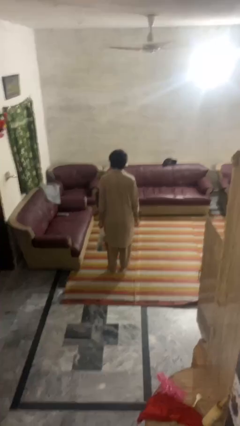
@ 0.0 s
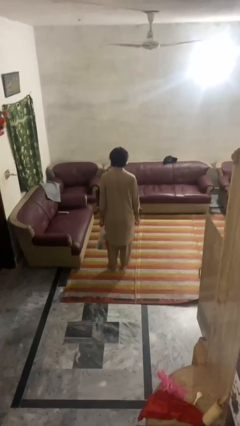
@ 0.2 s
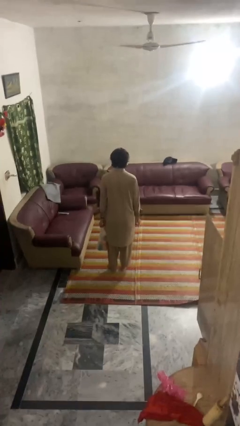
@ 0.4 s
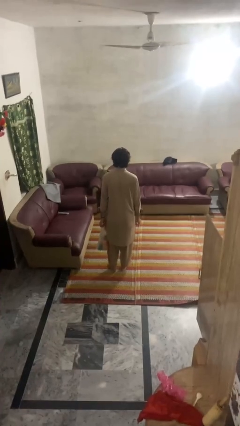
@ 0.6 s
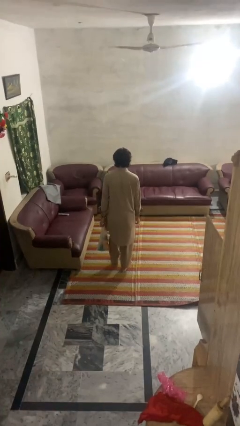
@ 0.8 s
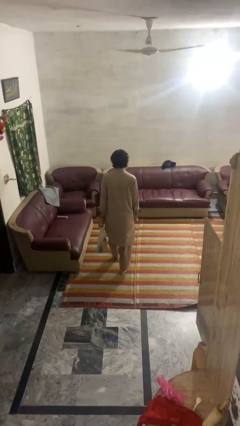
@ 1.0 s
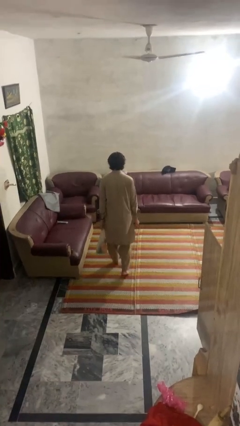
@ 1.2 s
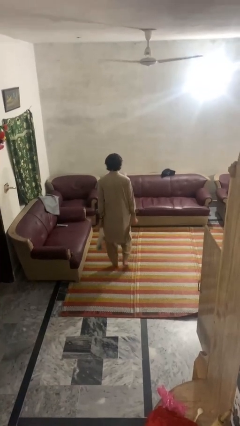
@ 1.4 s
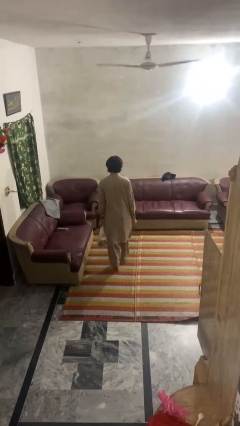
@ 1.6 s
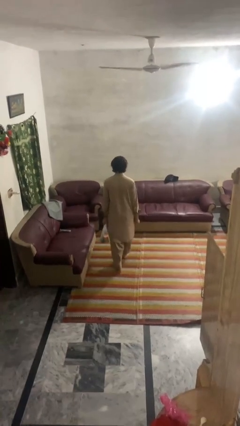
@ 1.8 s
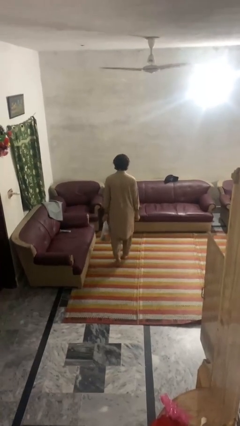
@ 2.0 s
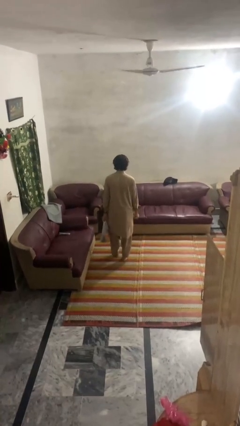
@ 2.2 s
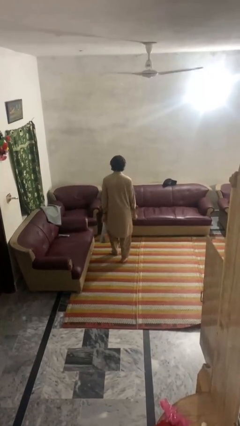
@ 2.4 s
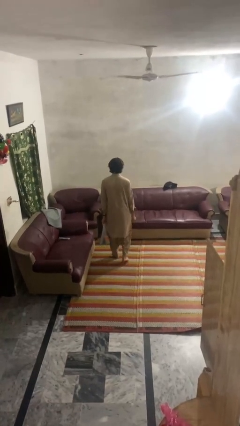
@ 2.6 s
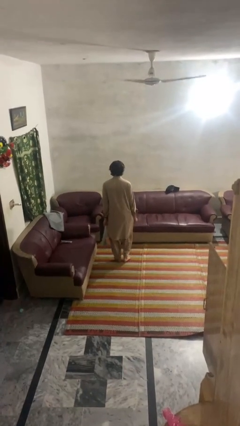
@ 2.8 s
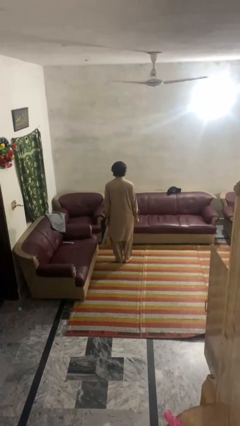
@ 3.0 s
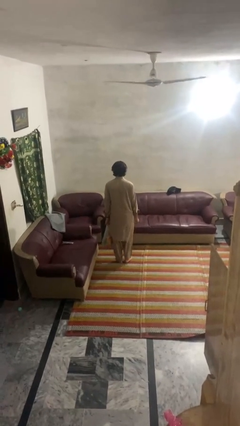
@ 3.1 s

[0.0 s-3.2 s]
person carries groceries

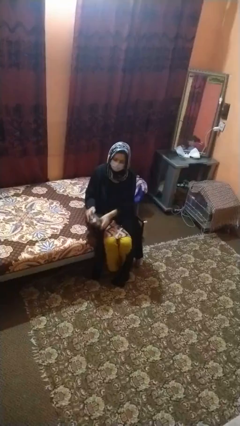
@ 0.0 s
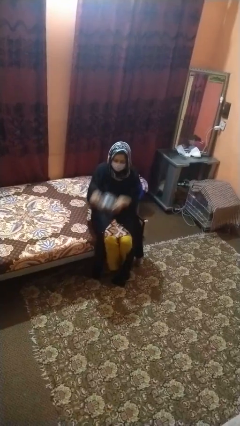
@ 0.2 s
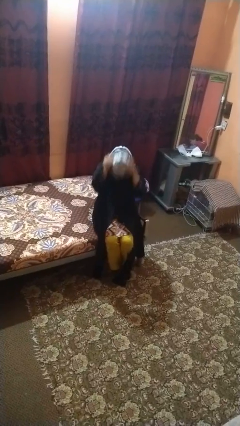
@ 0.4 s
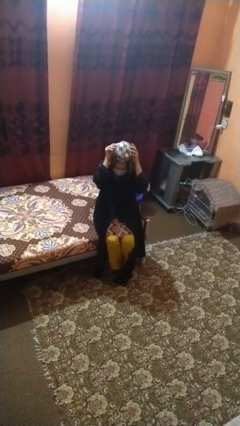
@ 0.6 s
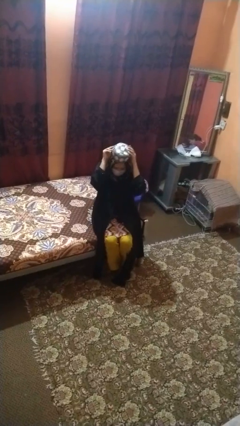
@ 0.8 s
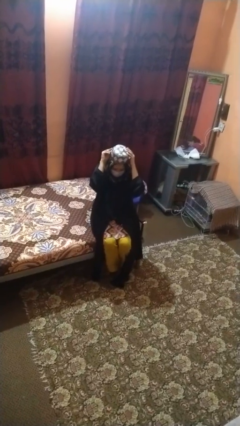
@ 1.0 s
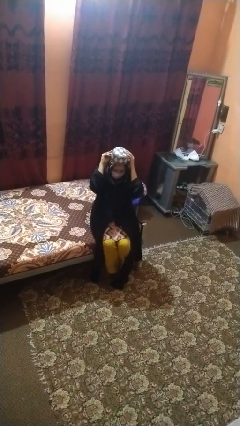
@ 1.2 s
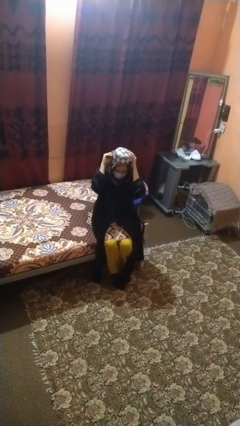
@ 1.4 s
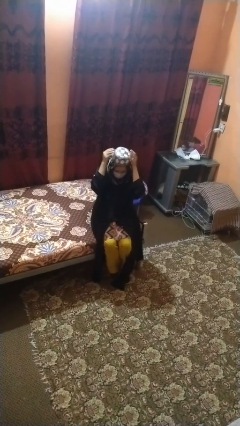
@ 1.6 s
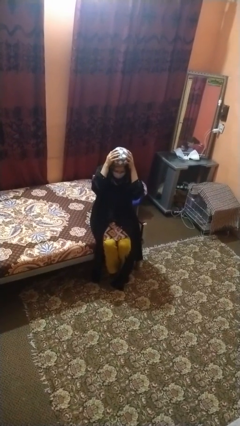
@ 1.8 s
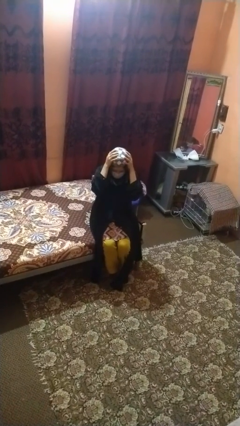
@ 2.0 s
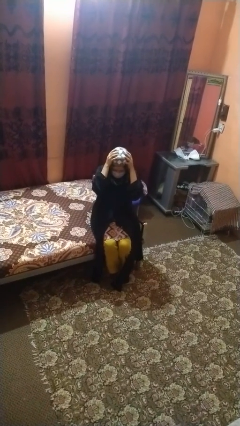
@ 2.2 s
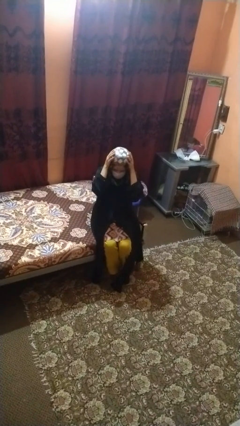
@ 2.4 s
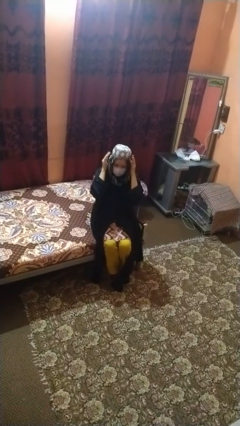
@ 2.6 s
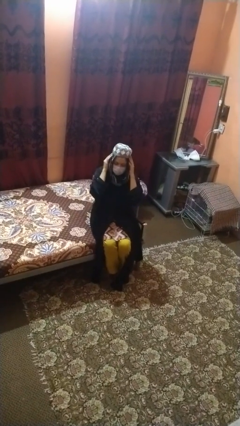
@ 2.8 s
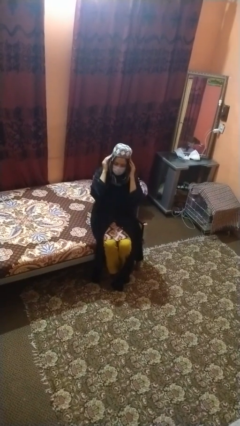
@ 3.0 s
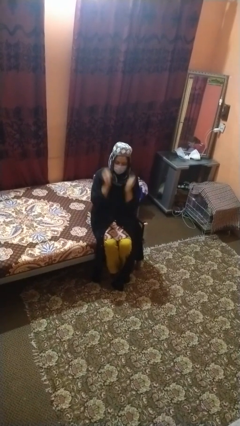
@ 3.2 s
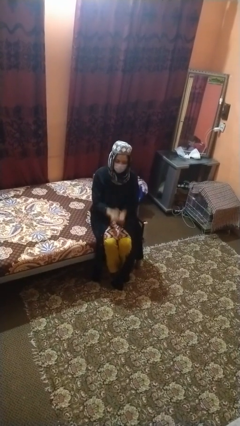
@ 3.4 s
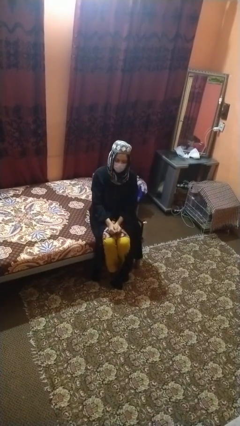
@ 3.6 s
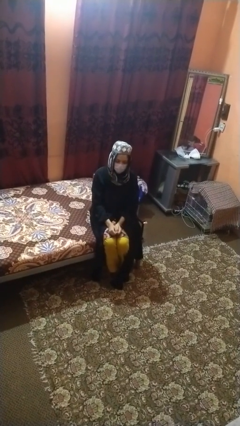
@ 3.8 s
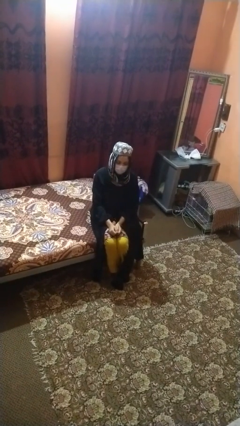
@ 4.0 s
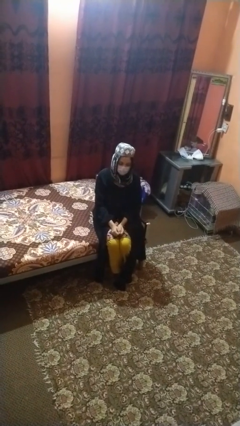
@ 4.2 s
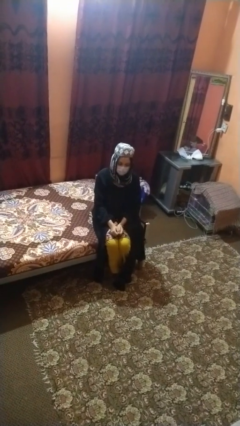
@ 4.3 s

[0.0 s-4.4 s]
person puts on hat

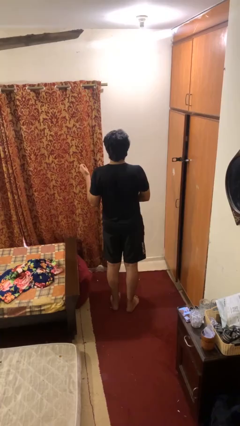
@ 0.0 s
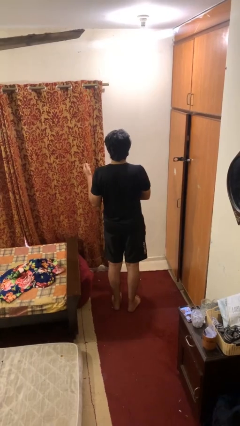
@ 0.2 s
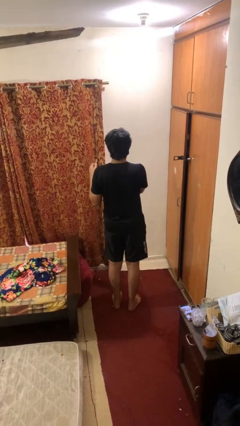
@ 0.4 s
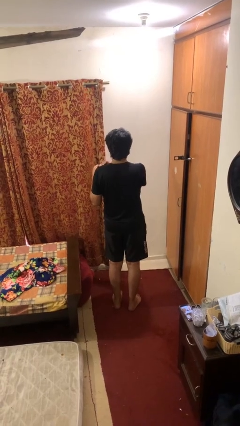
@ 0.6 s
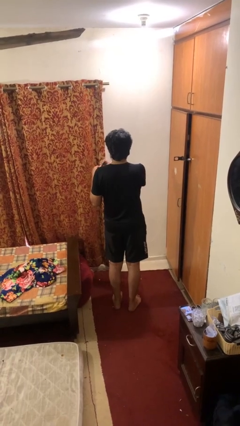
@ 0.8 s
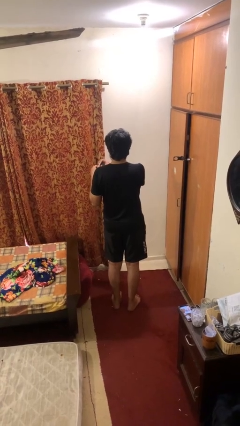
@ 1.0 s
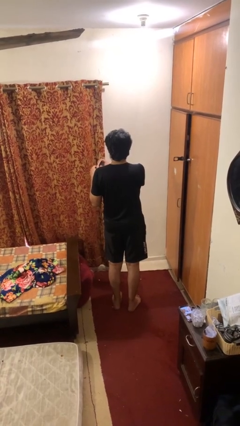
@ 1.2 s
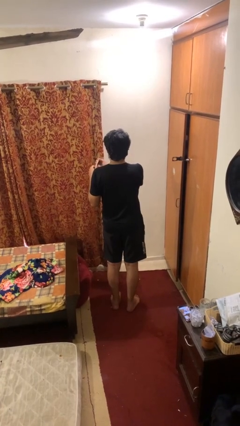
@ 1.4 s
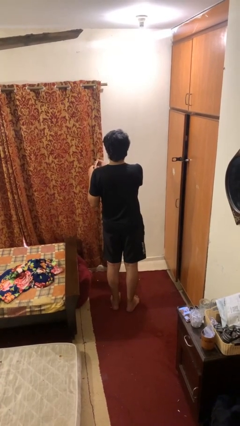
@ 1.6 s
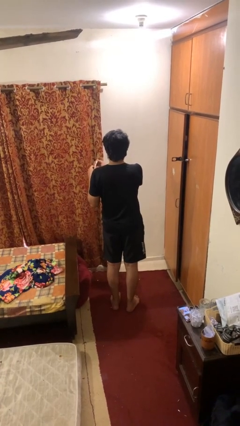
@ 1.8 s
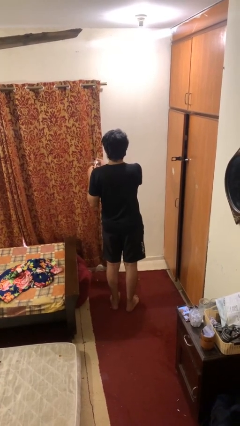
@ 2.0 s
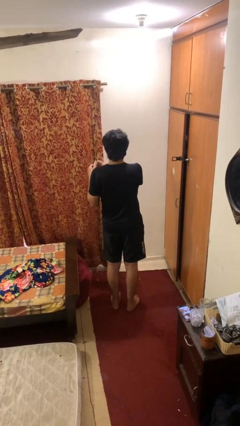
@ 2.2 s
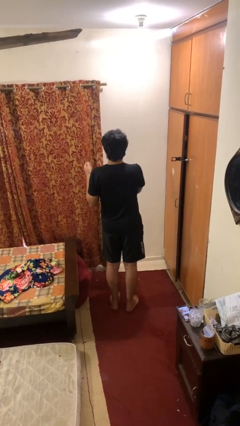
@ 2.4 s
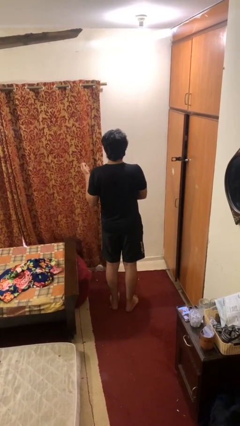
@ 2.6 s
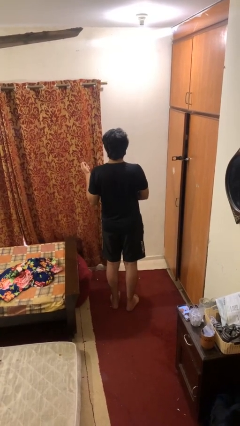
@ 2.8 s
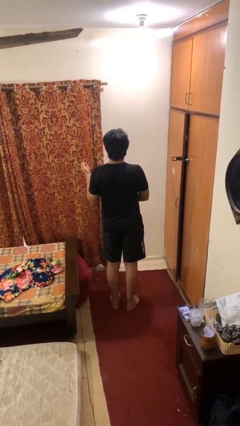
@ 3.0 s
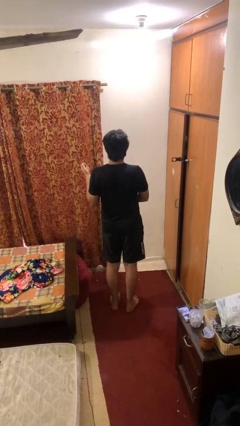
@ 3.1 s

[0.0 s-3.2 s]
person files fingernails

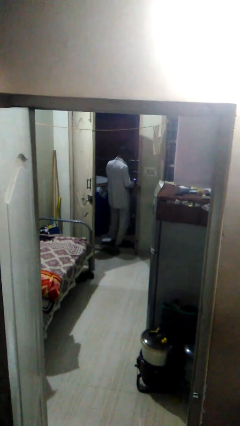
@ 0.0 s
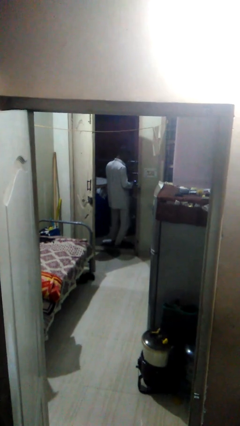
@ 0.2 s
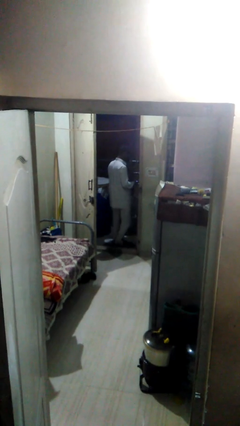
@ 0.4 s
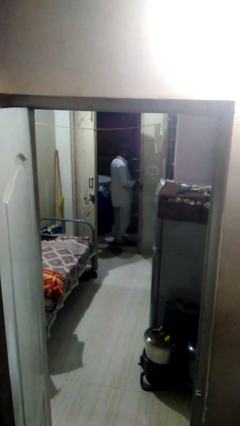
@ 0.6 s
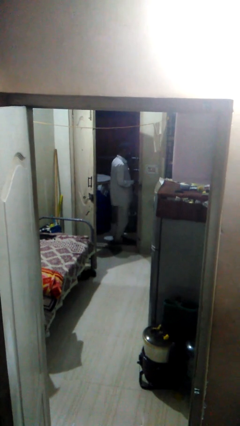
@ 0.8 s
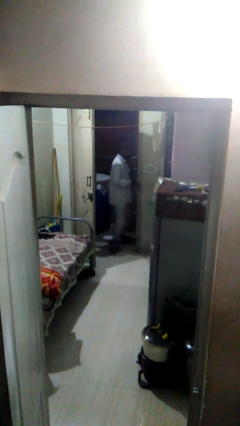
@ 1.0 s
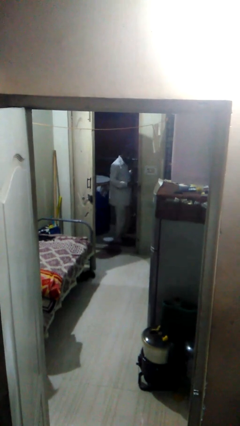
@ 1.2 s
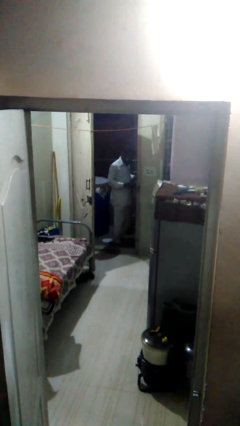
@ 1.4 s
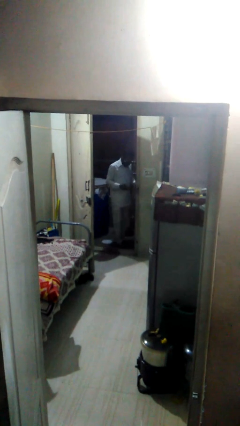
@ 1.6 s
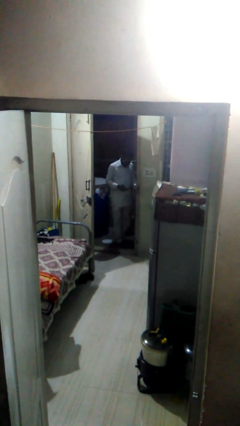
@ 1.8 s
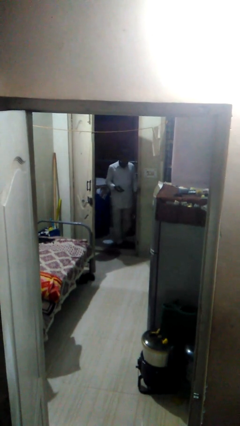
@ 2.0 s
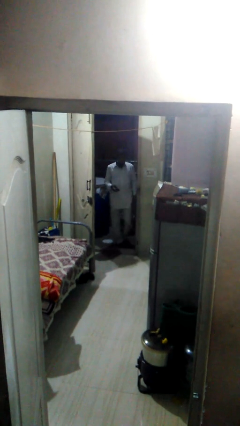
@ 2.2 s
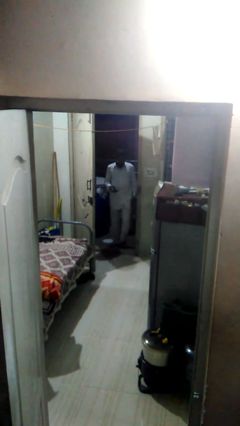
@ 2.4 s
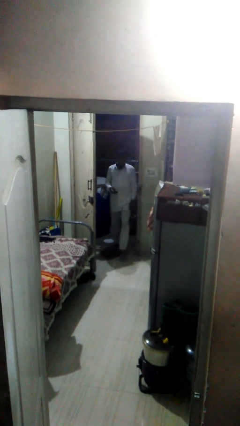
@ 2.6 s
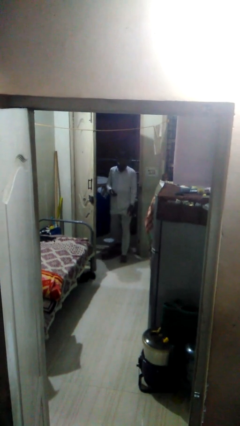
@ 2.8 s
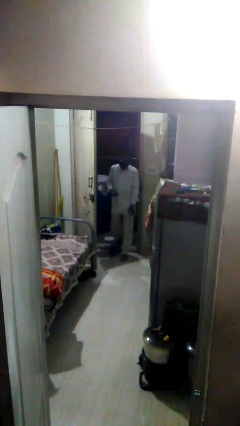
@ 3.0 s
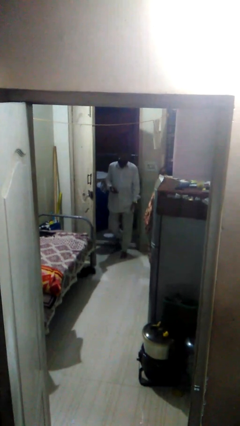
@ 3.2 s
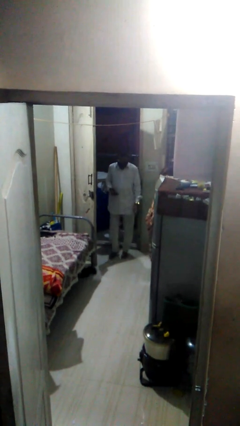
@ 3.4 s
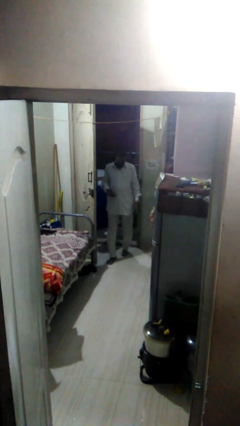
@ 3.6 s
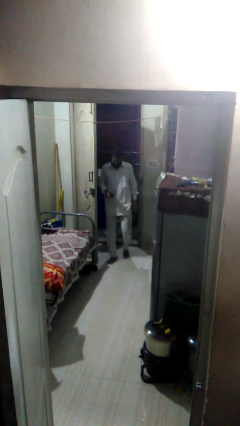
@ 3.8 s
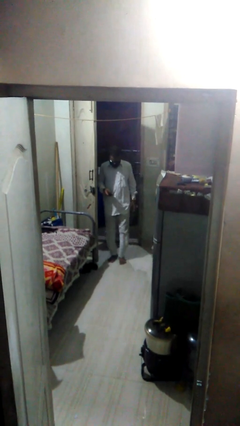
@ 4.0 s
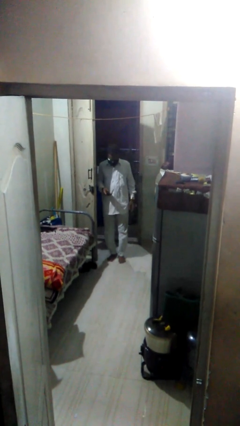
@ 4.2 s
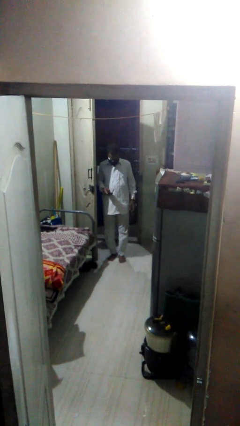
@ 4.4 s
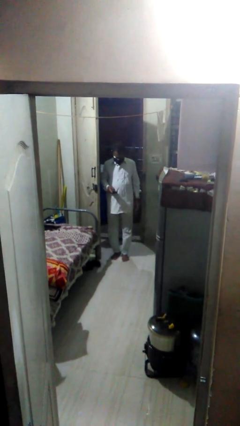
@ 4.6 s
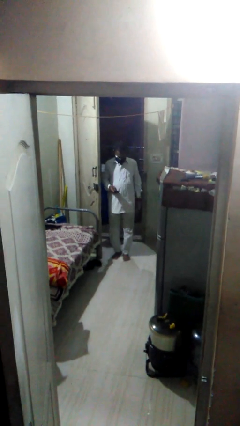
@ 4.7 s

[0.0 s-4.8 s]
person enters scene through structure

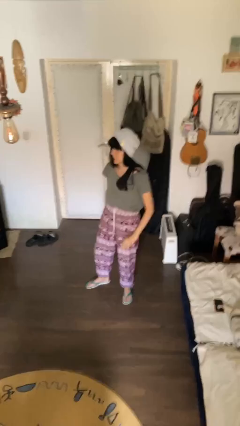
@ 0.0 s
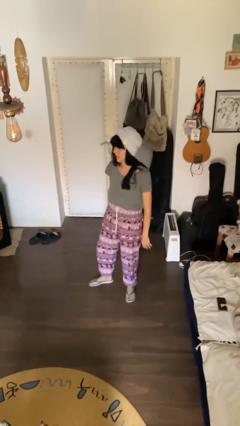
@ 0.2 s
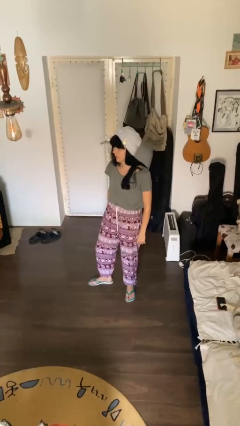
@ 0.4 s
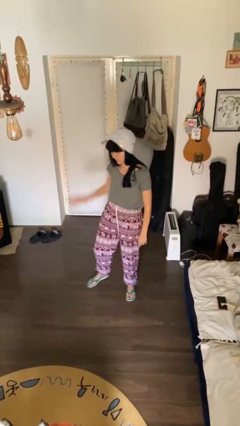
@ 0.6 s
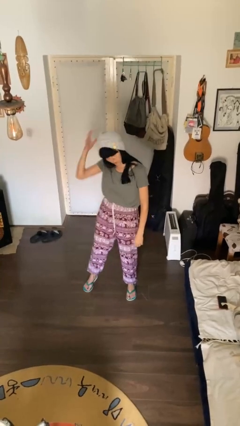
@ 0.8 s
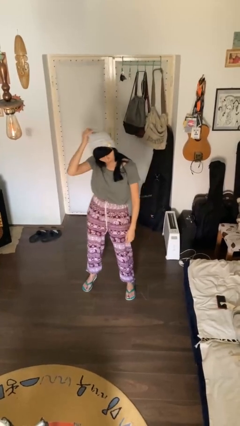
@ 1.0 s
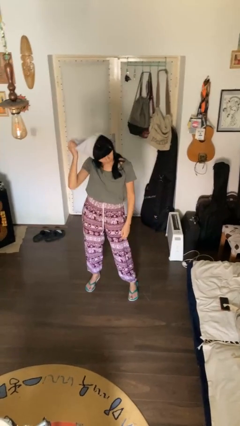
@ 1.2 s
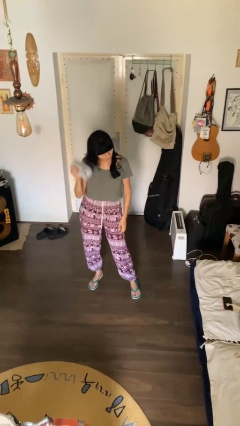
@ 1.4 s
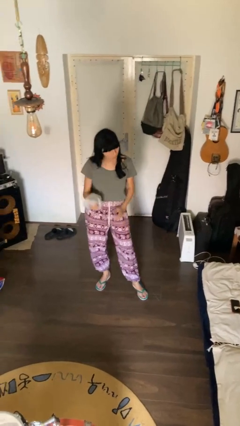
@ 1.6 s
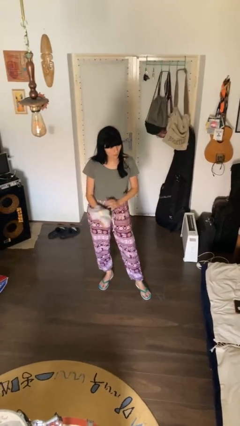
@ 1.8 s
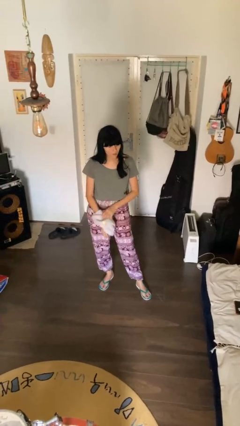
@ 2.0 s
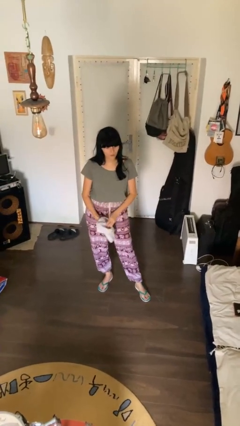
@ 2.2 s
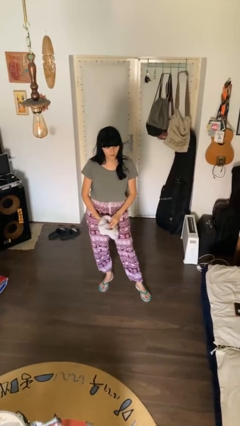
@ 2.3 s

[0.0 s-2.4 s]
person takes off hat
